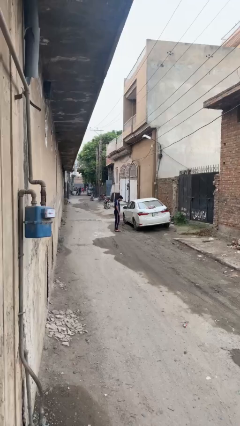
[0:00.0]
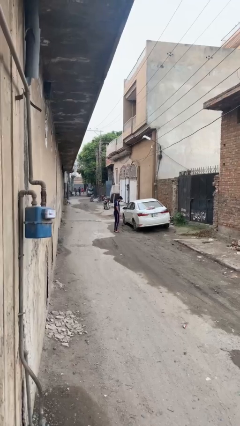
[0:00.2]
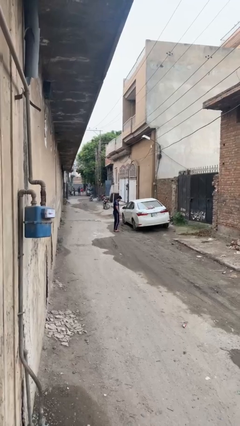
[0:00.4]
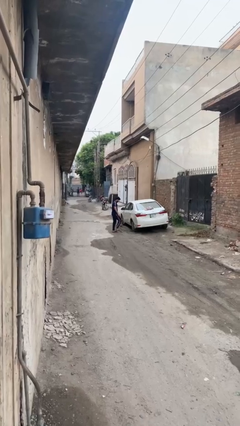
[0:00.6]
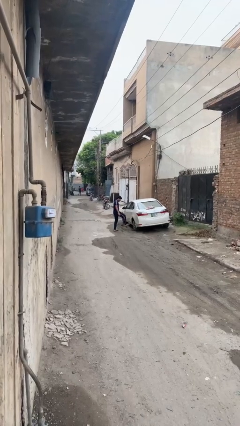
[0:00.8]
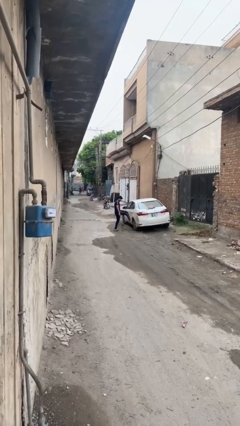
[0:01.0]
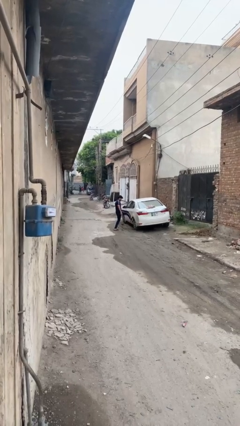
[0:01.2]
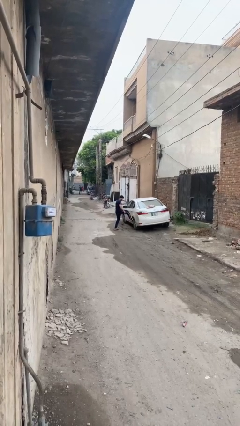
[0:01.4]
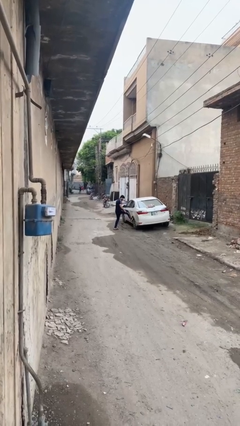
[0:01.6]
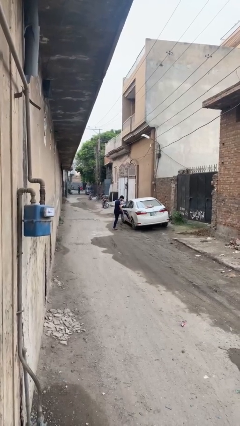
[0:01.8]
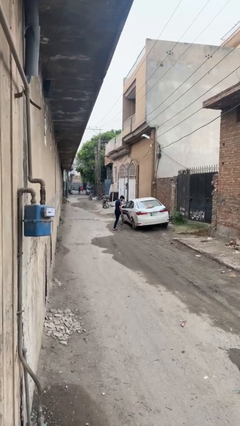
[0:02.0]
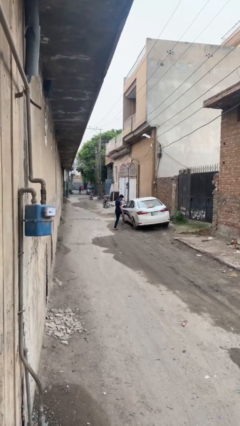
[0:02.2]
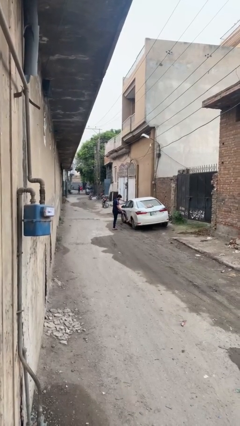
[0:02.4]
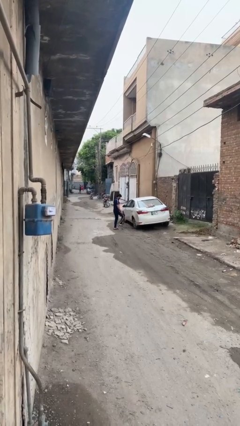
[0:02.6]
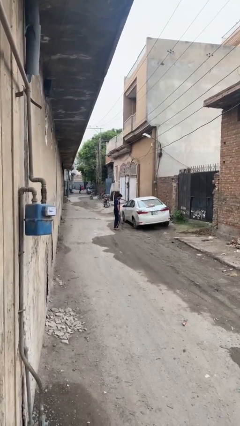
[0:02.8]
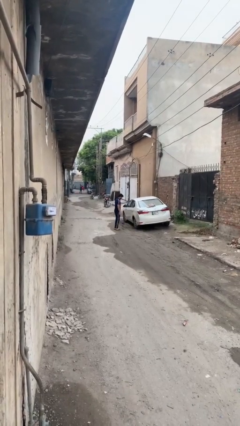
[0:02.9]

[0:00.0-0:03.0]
person kicks car tires

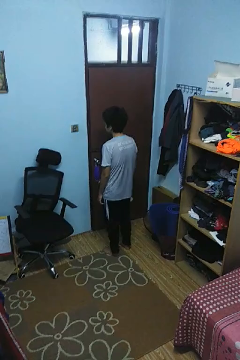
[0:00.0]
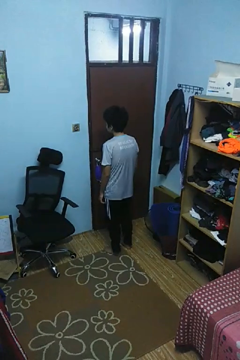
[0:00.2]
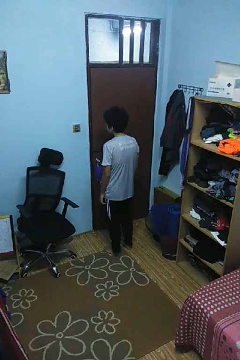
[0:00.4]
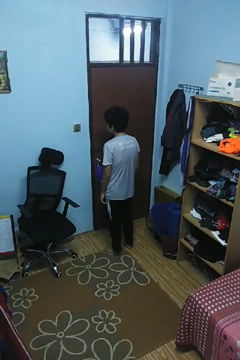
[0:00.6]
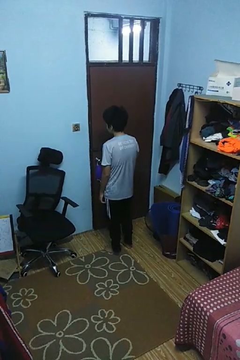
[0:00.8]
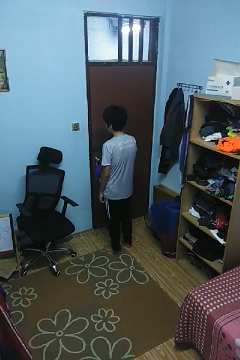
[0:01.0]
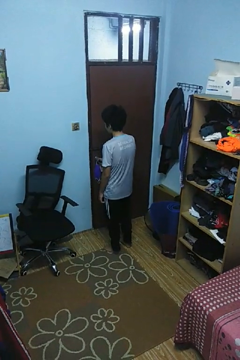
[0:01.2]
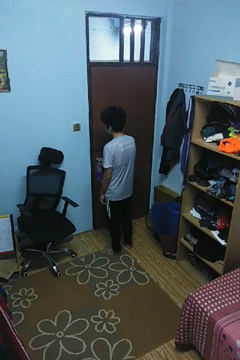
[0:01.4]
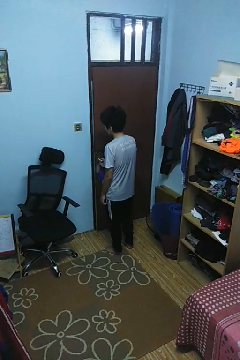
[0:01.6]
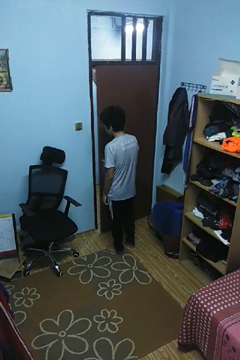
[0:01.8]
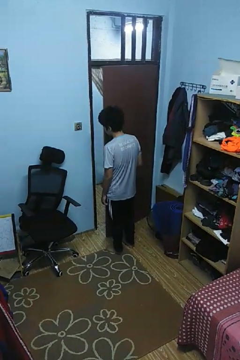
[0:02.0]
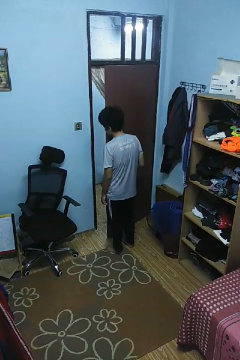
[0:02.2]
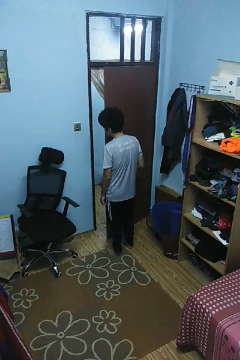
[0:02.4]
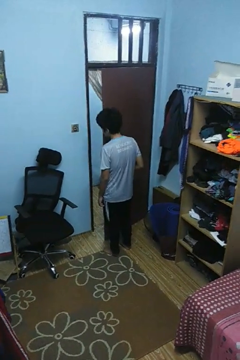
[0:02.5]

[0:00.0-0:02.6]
person opens facility door

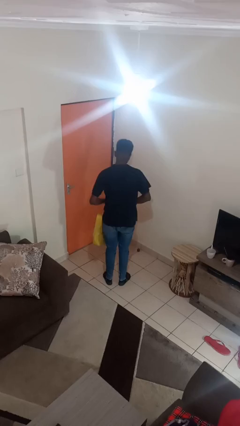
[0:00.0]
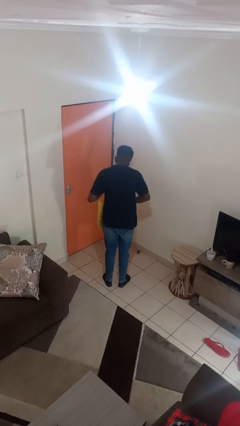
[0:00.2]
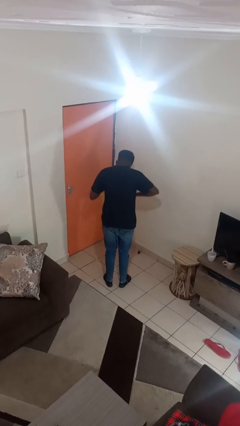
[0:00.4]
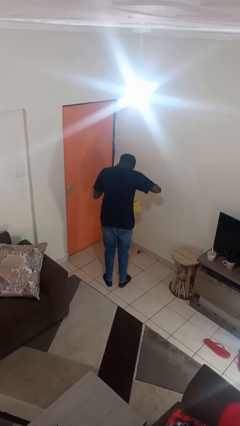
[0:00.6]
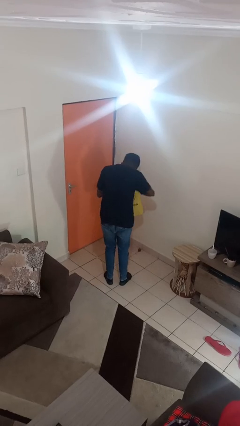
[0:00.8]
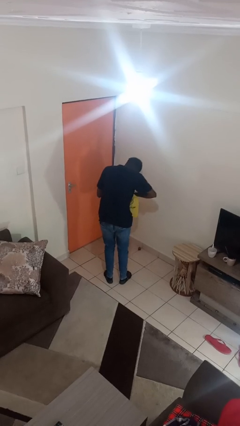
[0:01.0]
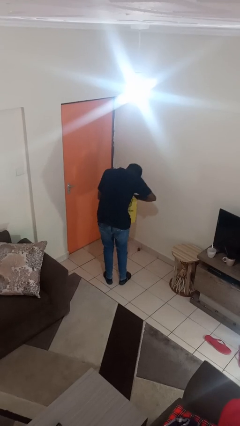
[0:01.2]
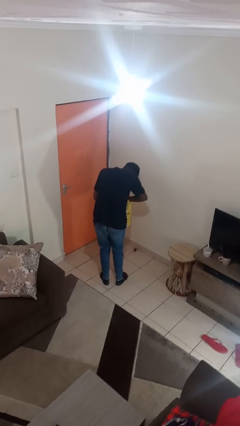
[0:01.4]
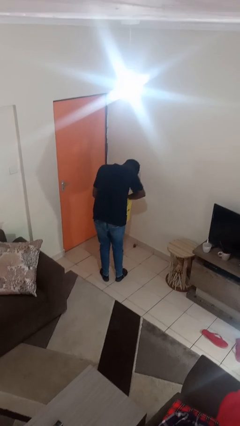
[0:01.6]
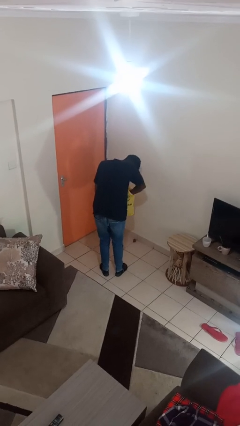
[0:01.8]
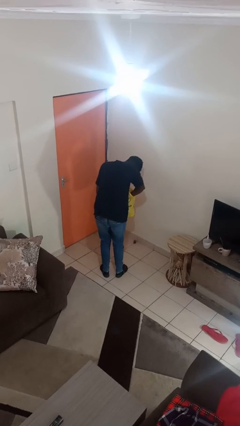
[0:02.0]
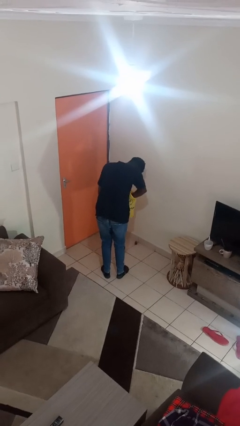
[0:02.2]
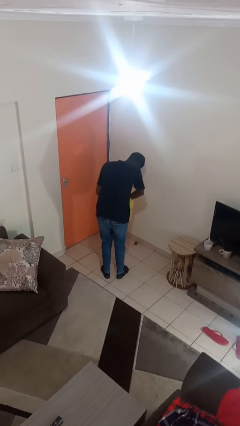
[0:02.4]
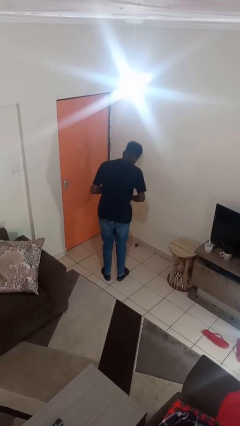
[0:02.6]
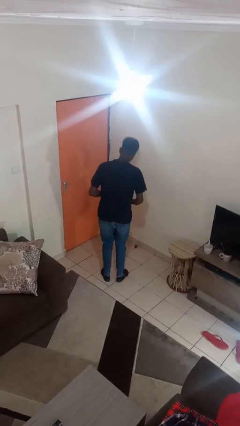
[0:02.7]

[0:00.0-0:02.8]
person searches in bag

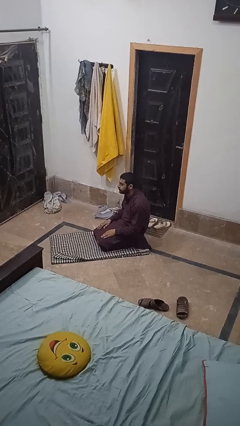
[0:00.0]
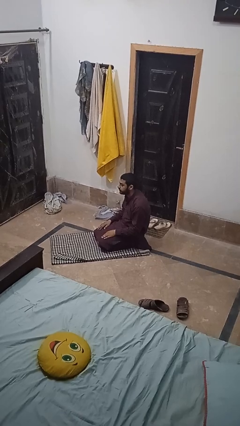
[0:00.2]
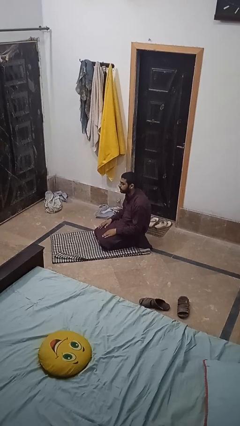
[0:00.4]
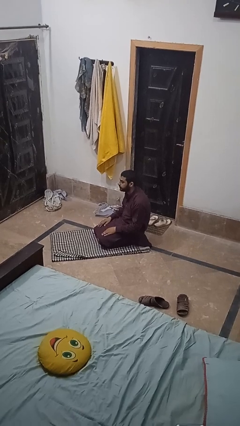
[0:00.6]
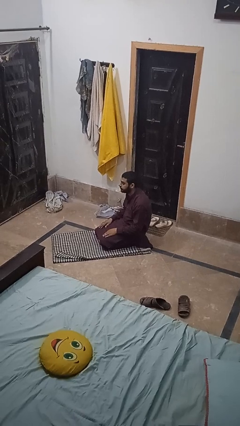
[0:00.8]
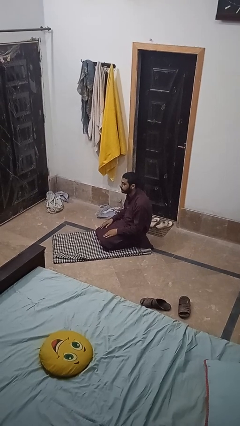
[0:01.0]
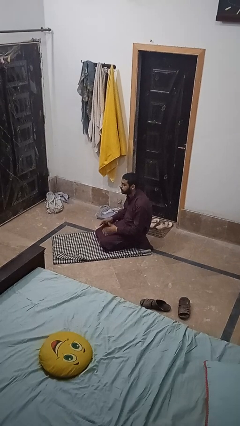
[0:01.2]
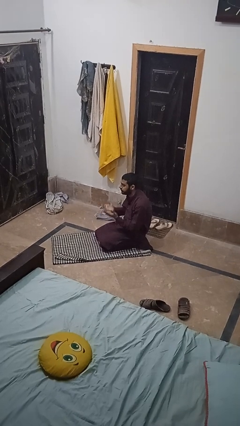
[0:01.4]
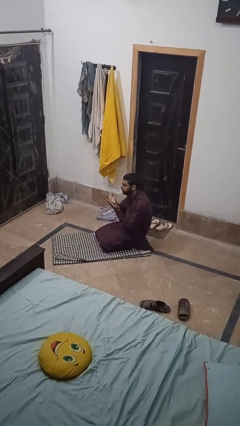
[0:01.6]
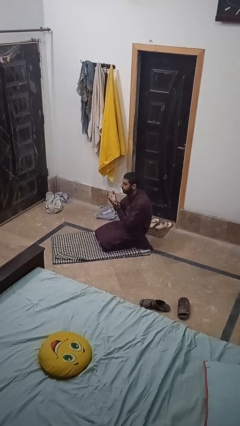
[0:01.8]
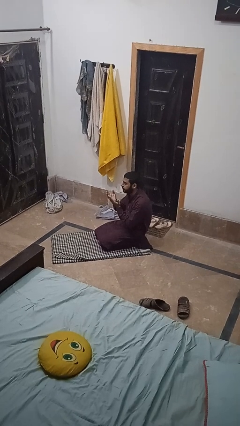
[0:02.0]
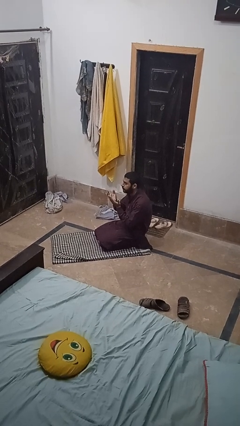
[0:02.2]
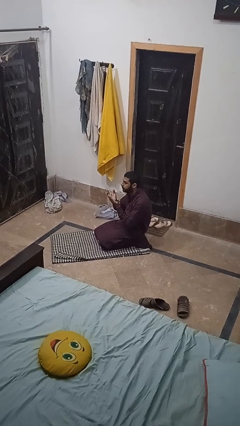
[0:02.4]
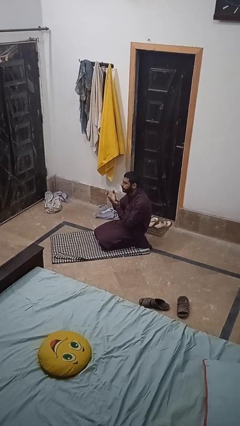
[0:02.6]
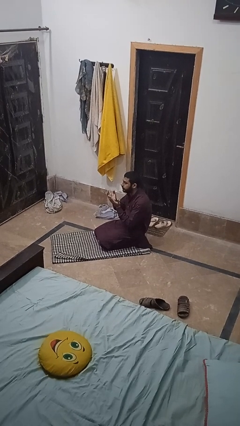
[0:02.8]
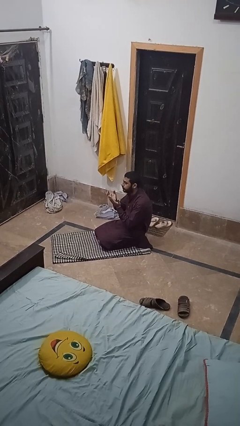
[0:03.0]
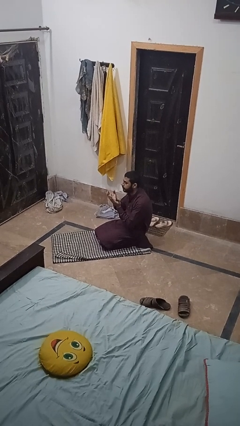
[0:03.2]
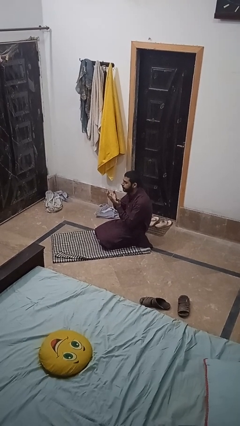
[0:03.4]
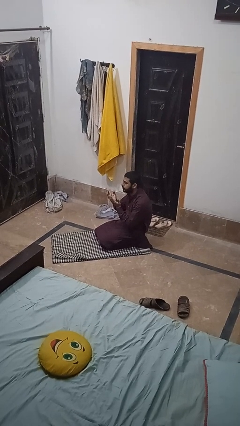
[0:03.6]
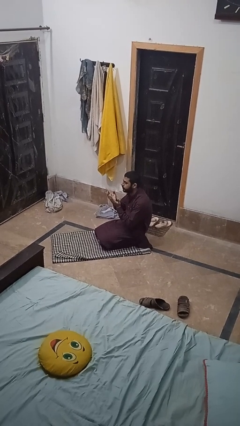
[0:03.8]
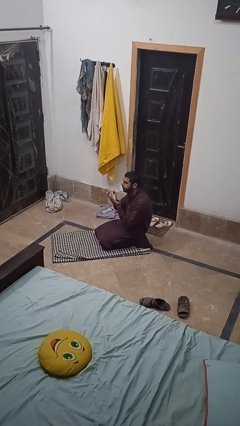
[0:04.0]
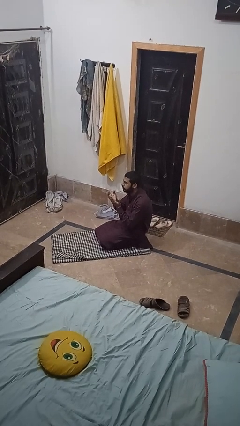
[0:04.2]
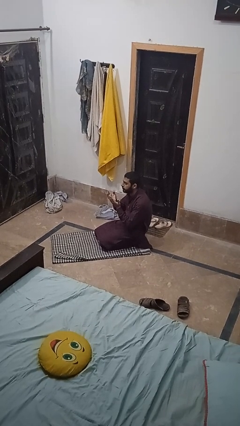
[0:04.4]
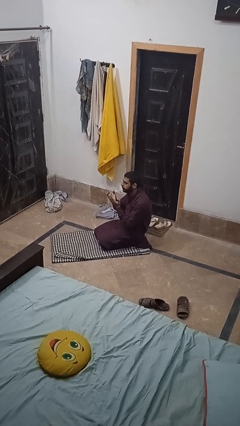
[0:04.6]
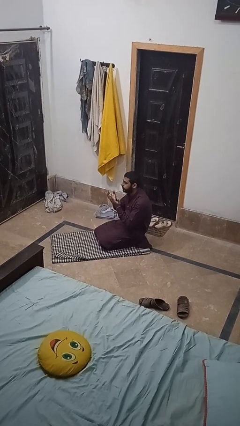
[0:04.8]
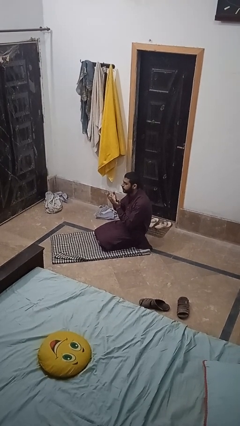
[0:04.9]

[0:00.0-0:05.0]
person prays

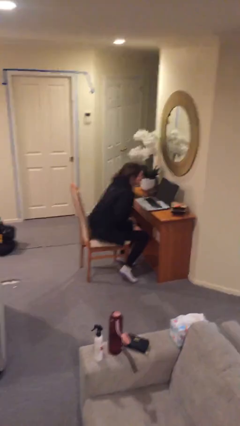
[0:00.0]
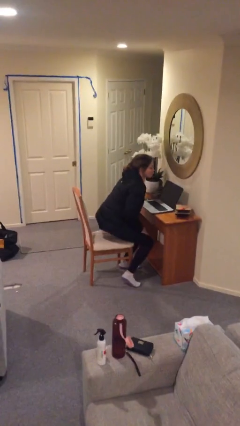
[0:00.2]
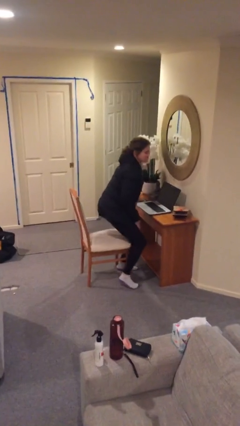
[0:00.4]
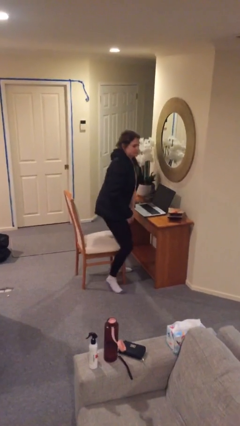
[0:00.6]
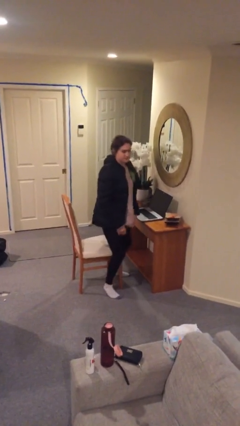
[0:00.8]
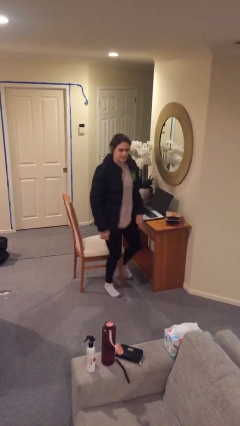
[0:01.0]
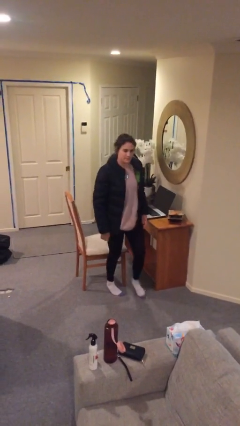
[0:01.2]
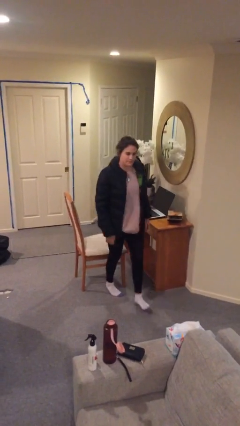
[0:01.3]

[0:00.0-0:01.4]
person stands up

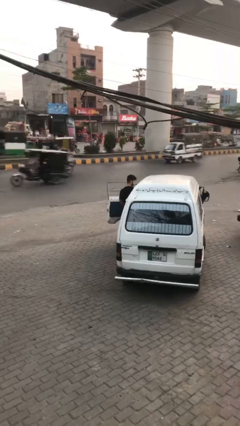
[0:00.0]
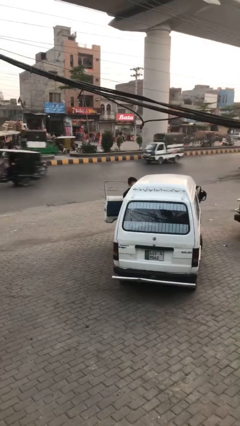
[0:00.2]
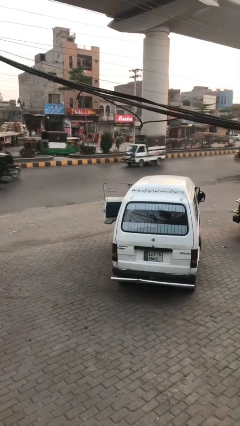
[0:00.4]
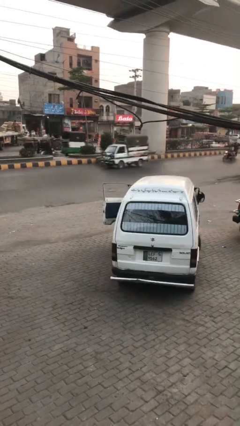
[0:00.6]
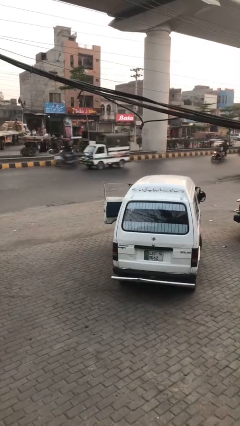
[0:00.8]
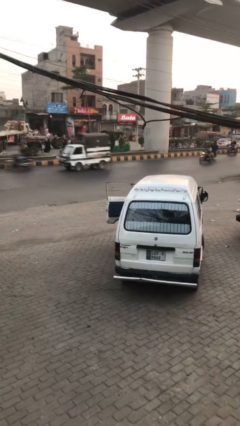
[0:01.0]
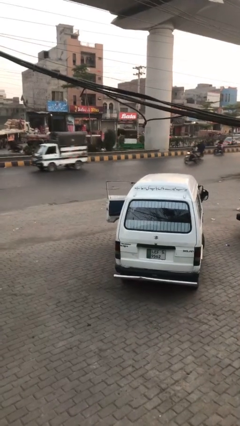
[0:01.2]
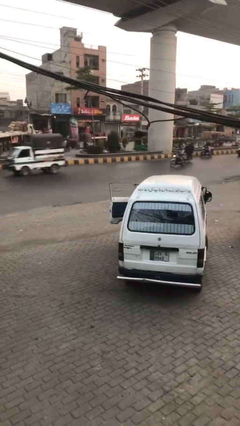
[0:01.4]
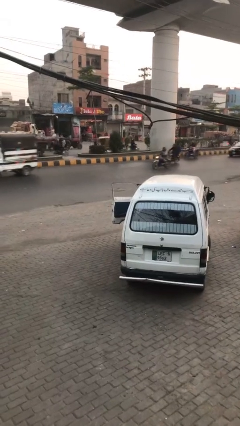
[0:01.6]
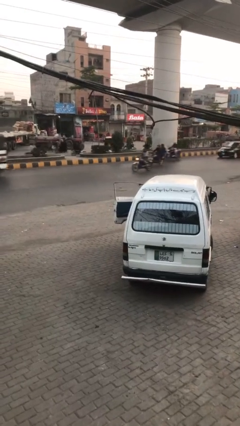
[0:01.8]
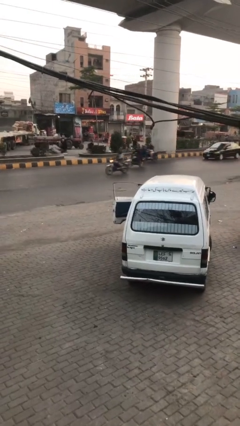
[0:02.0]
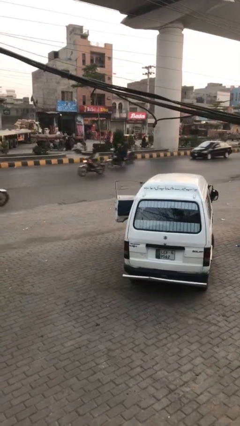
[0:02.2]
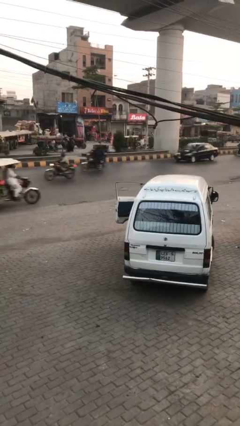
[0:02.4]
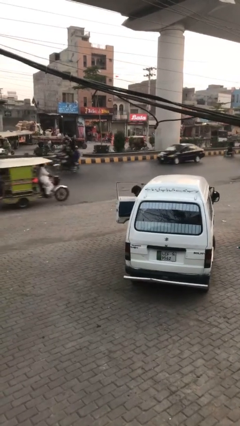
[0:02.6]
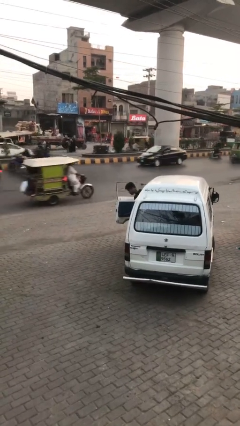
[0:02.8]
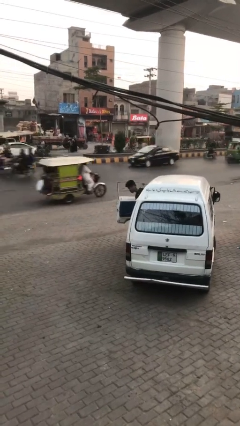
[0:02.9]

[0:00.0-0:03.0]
person enters car
